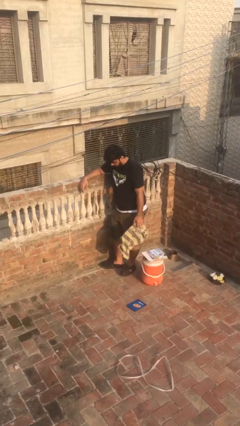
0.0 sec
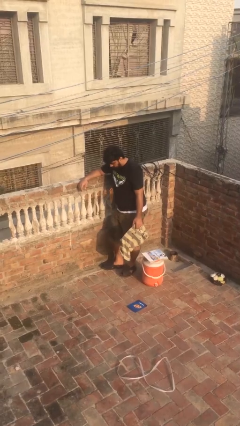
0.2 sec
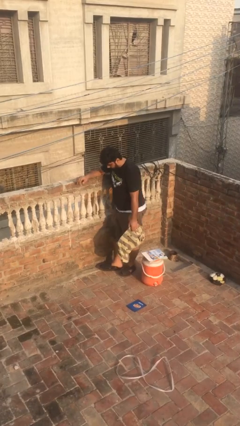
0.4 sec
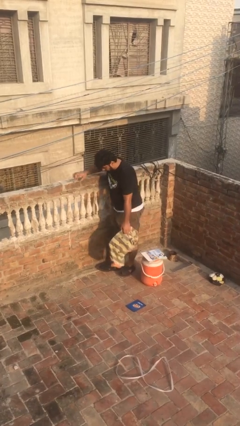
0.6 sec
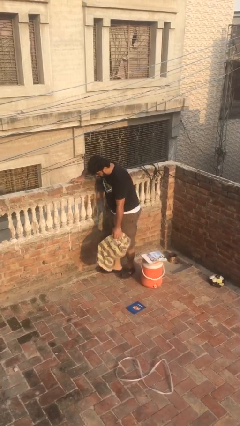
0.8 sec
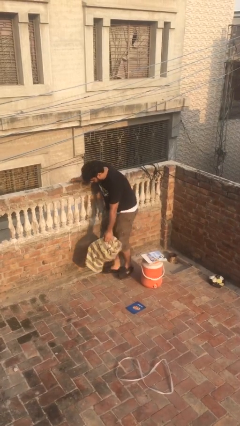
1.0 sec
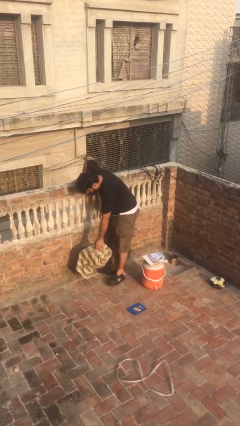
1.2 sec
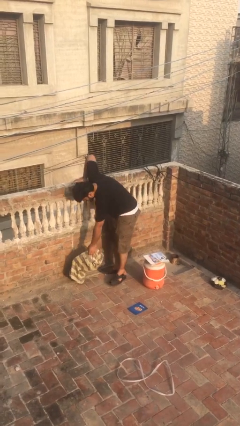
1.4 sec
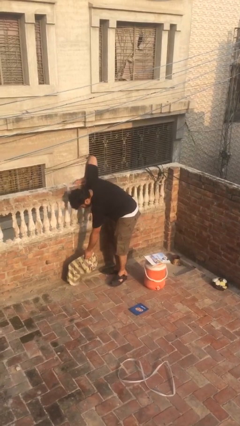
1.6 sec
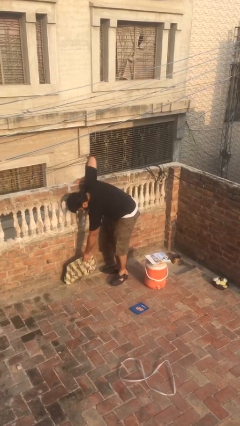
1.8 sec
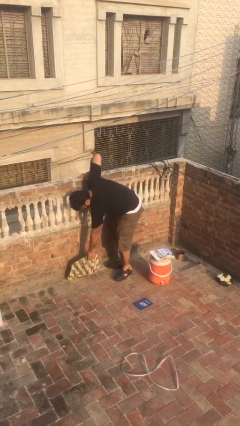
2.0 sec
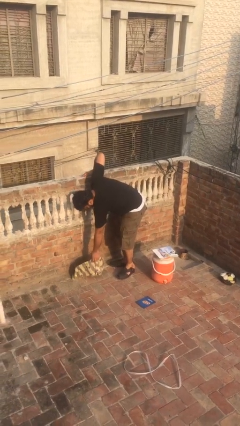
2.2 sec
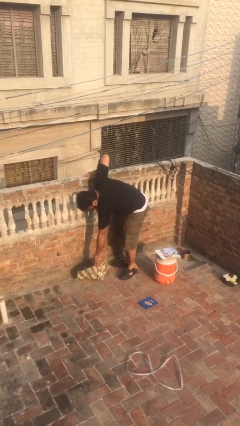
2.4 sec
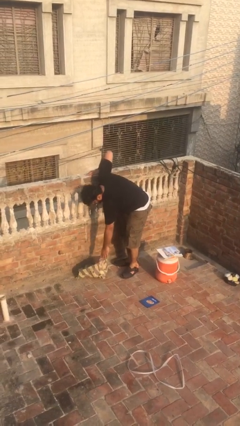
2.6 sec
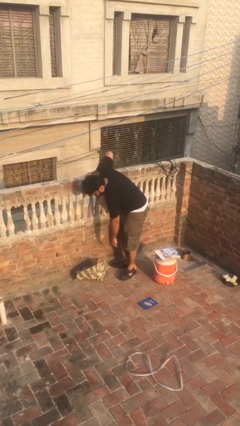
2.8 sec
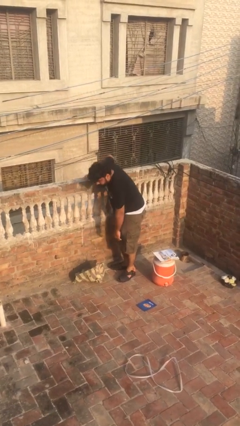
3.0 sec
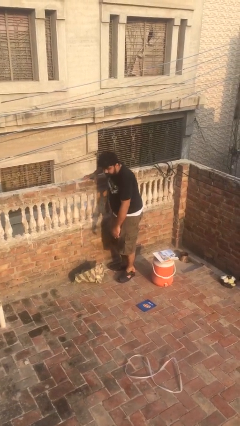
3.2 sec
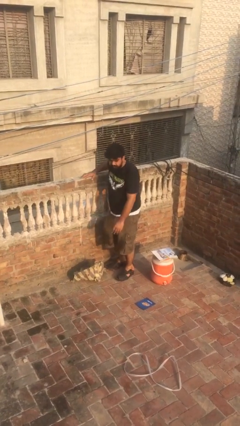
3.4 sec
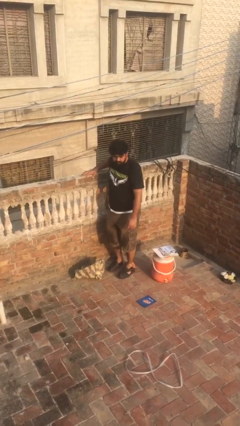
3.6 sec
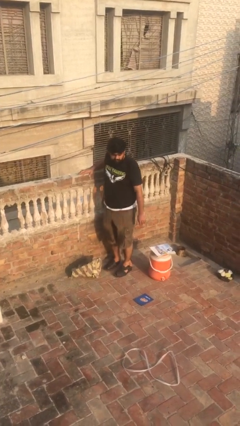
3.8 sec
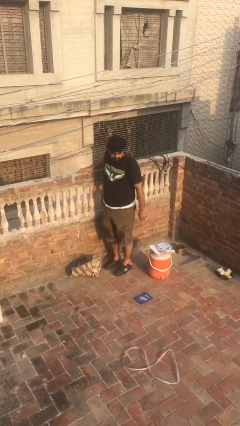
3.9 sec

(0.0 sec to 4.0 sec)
person puts down object on floor

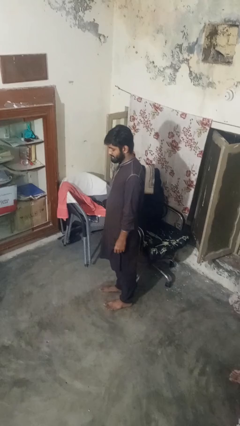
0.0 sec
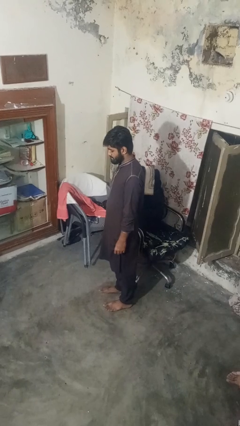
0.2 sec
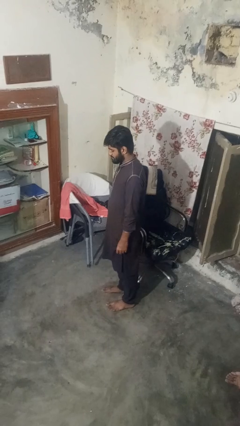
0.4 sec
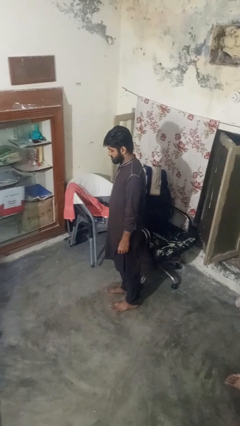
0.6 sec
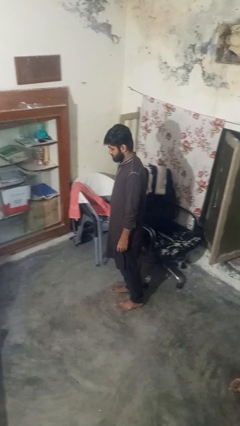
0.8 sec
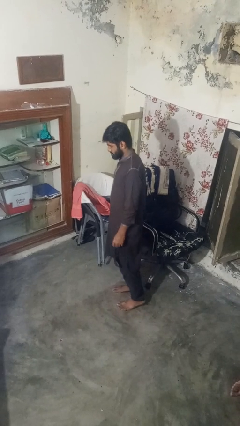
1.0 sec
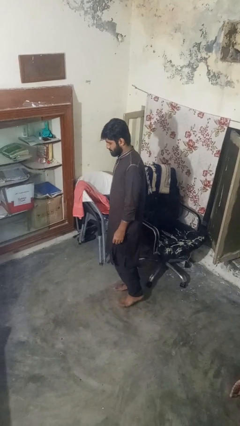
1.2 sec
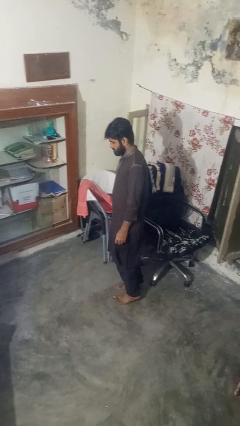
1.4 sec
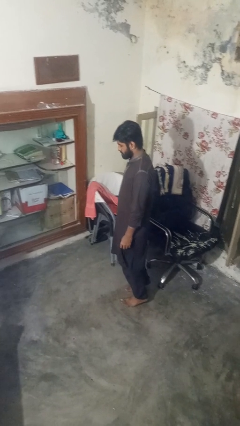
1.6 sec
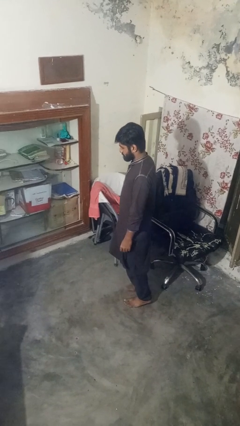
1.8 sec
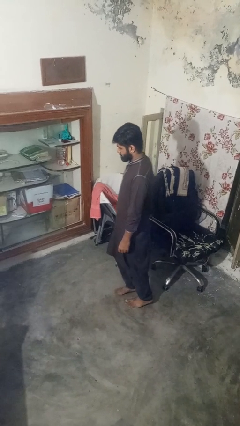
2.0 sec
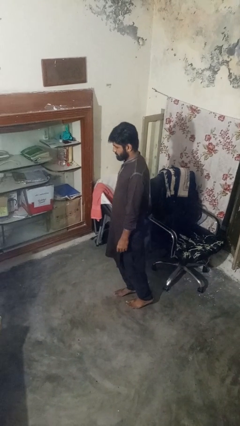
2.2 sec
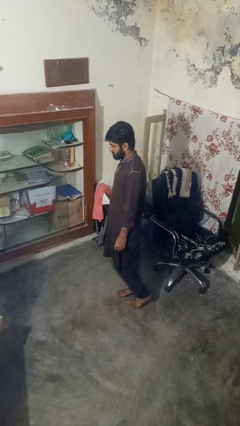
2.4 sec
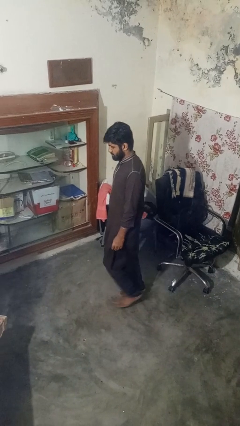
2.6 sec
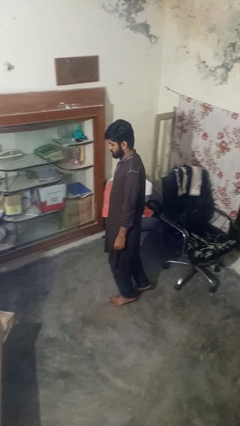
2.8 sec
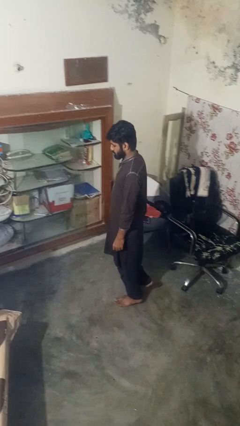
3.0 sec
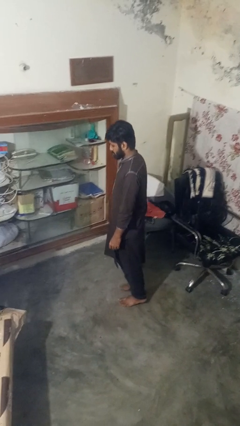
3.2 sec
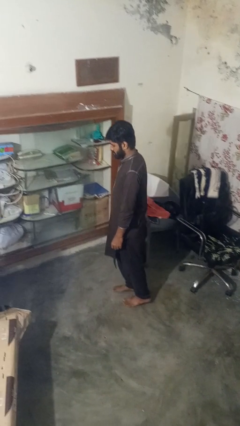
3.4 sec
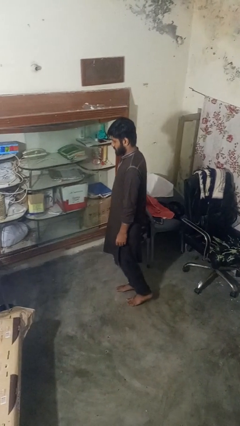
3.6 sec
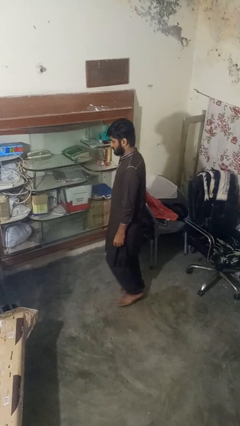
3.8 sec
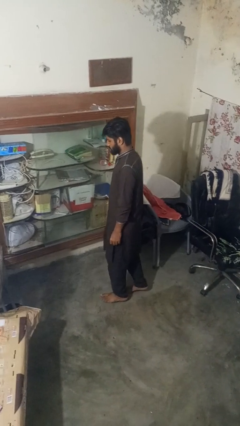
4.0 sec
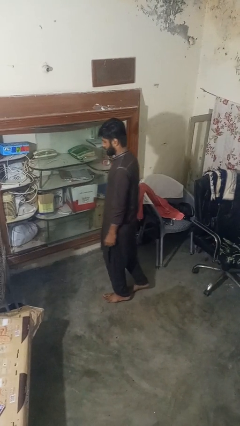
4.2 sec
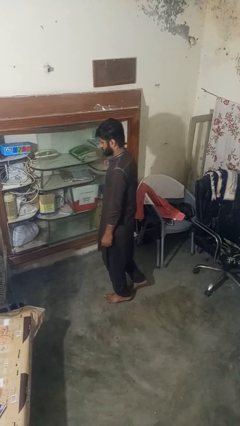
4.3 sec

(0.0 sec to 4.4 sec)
person walks tiptoe

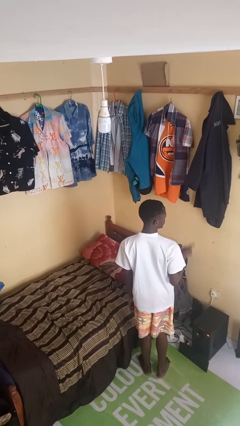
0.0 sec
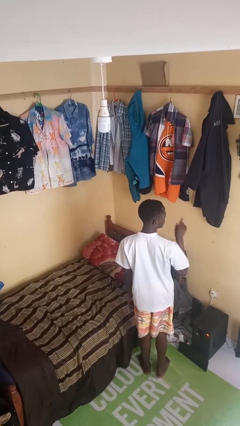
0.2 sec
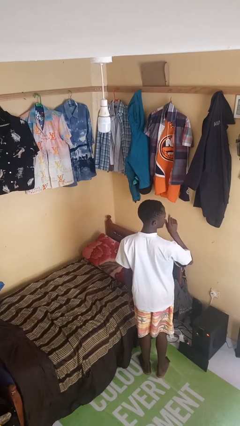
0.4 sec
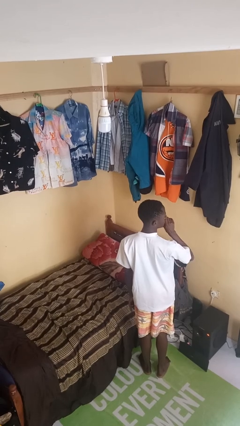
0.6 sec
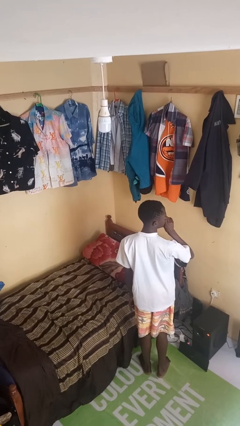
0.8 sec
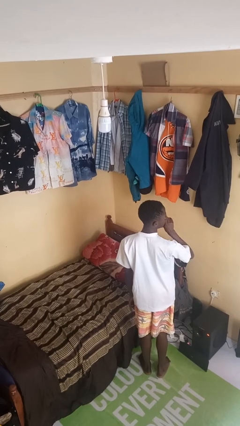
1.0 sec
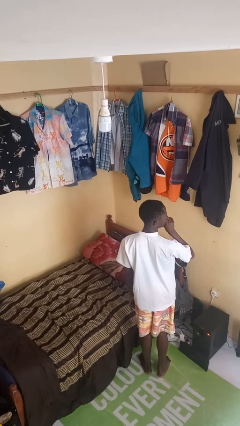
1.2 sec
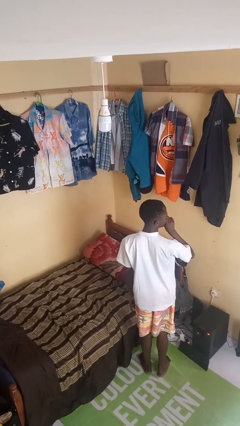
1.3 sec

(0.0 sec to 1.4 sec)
person gestures be quiet

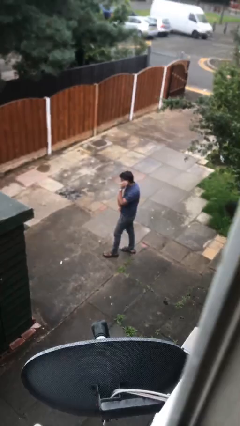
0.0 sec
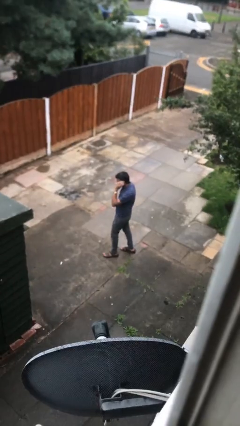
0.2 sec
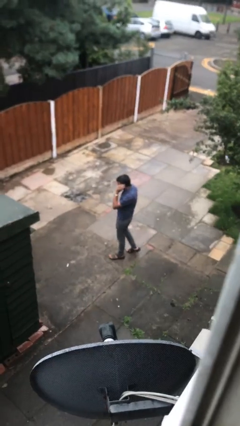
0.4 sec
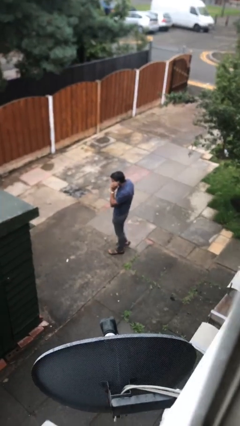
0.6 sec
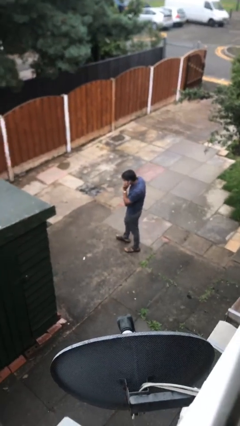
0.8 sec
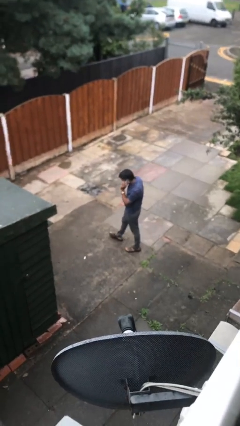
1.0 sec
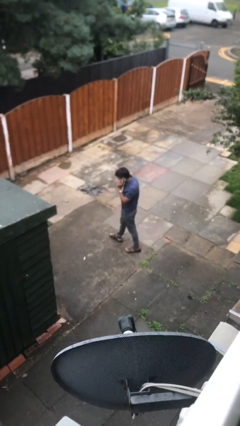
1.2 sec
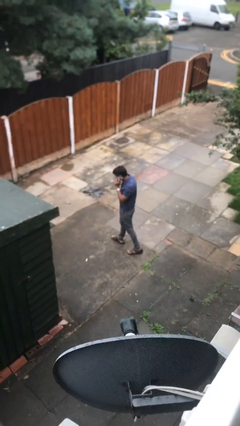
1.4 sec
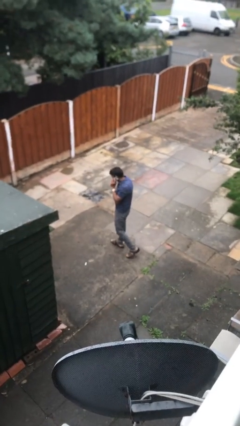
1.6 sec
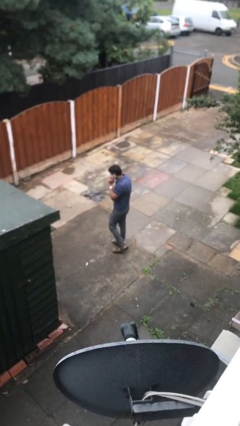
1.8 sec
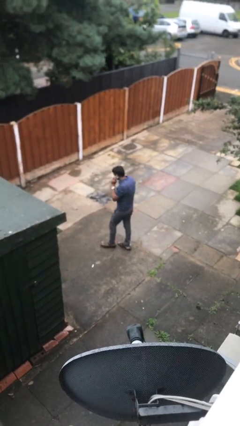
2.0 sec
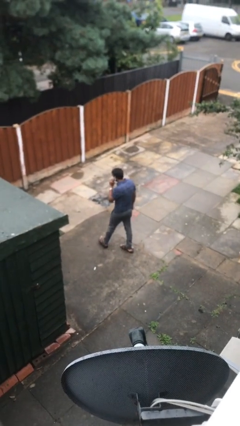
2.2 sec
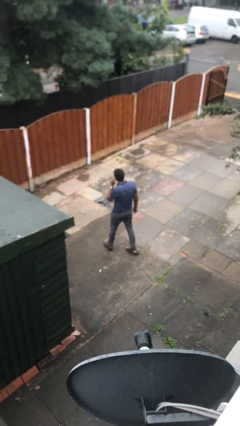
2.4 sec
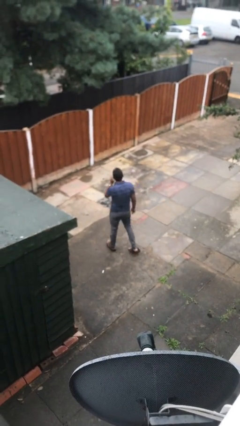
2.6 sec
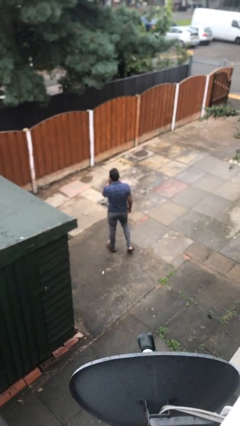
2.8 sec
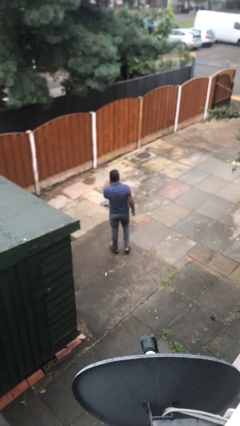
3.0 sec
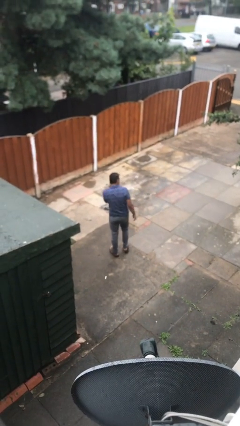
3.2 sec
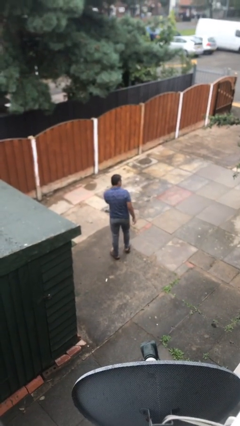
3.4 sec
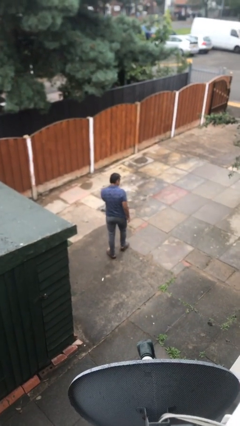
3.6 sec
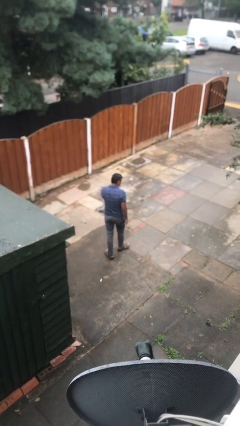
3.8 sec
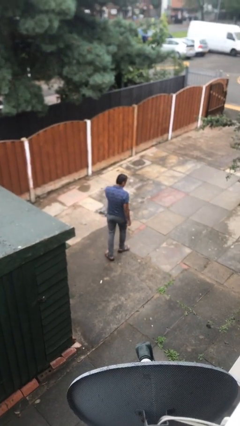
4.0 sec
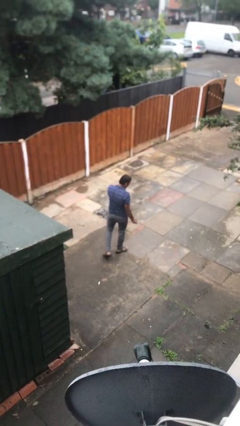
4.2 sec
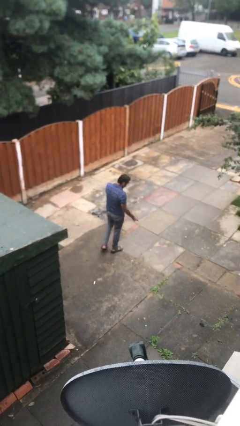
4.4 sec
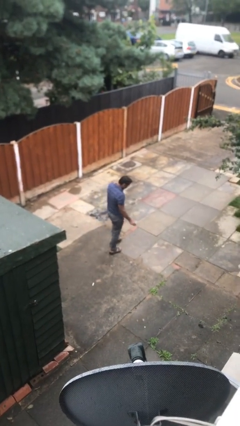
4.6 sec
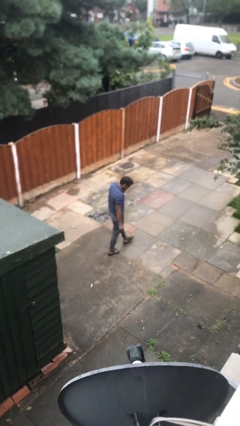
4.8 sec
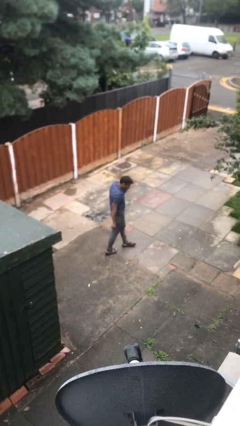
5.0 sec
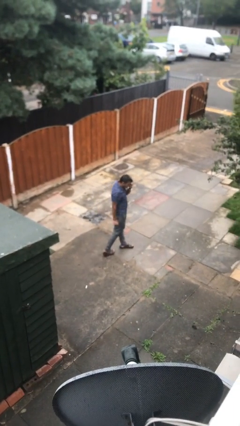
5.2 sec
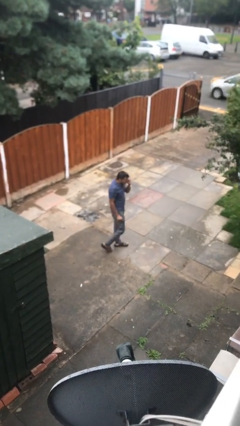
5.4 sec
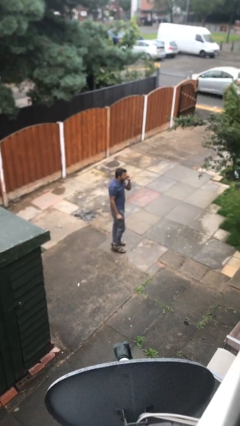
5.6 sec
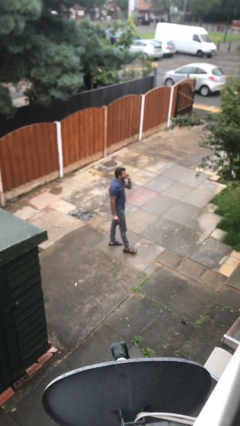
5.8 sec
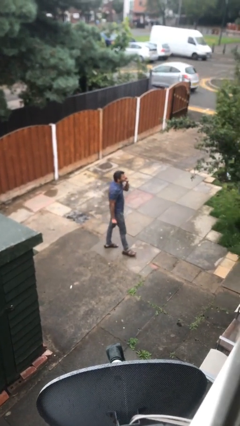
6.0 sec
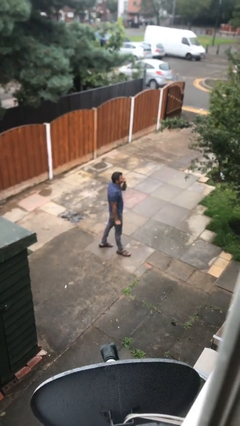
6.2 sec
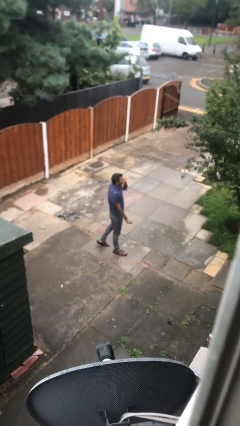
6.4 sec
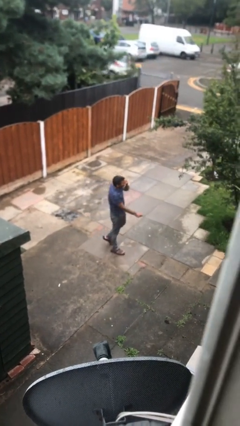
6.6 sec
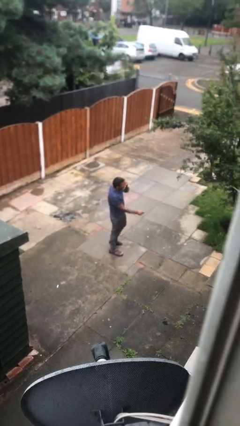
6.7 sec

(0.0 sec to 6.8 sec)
person talks on phone

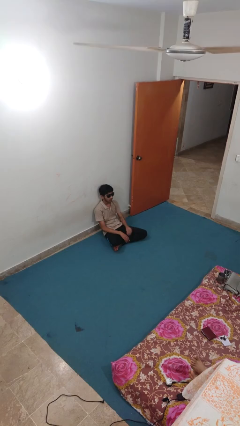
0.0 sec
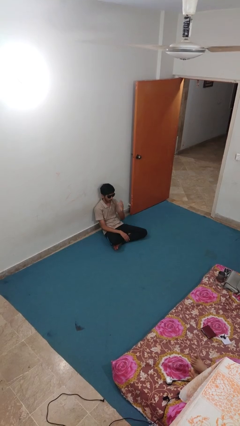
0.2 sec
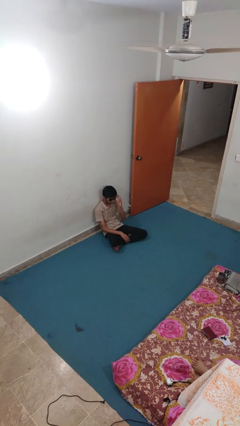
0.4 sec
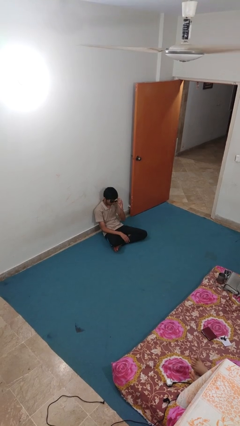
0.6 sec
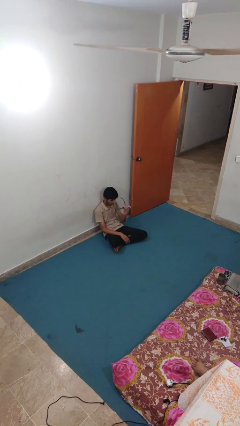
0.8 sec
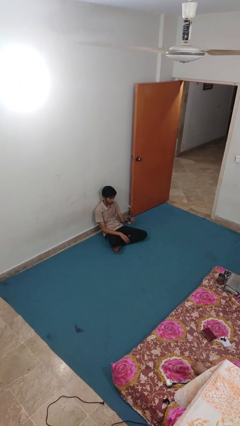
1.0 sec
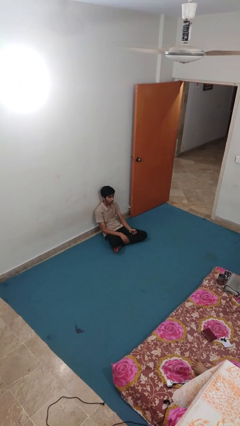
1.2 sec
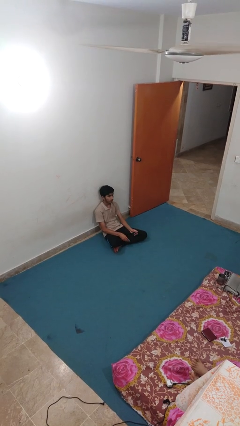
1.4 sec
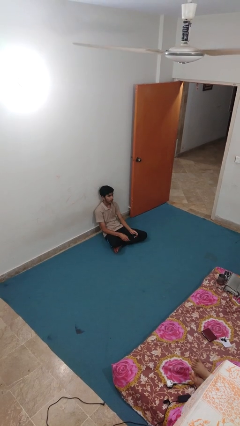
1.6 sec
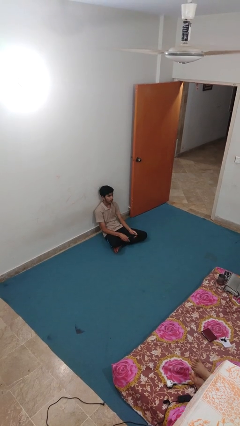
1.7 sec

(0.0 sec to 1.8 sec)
person takes off sunglasses
